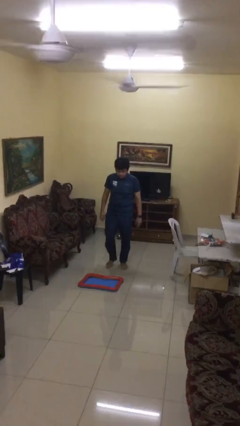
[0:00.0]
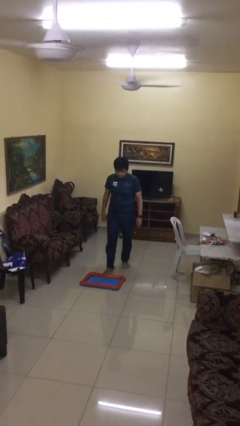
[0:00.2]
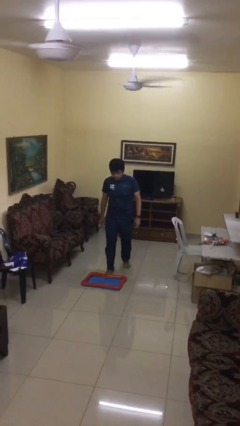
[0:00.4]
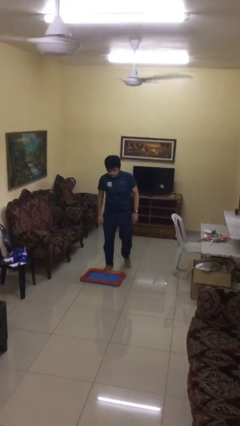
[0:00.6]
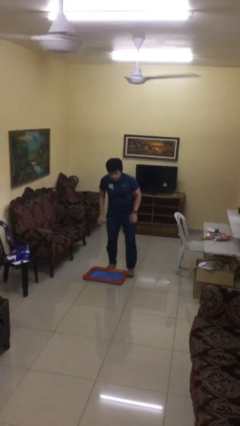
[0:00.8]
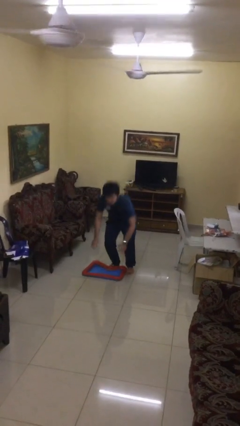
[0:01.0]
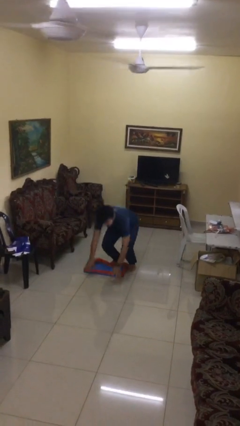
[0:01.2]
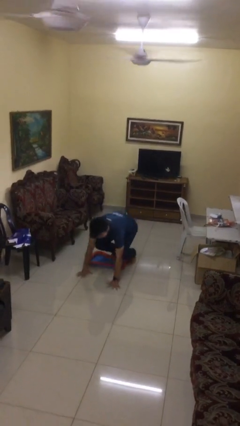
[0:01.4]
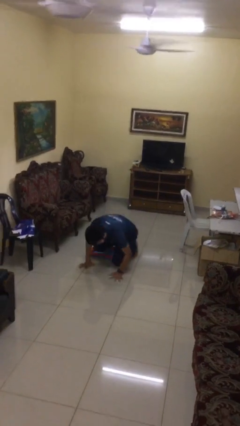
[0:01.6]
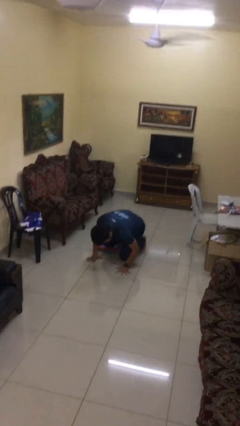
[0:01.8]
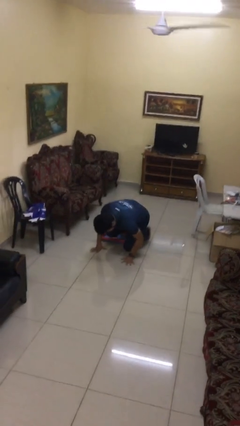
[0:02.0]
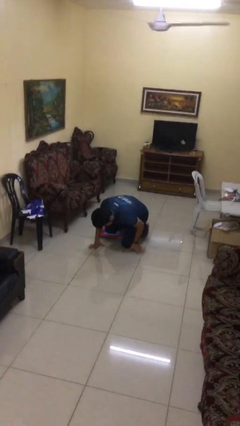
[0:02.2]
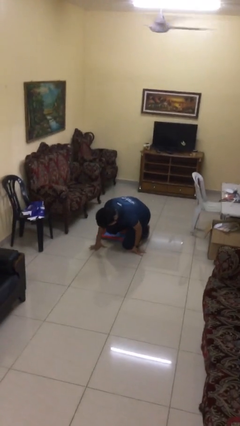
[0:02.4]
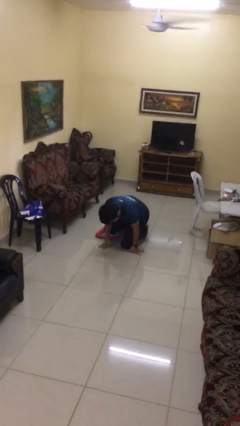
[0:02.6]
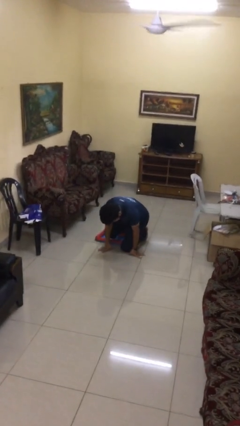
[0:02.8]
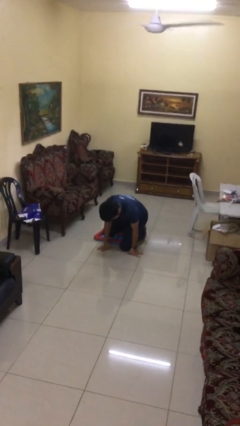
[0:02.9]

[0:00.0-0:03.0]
person trips on object on floor

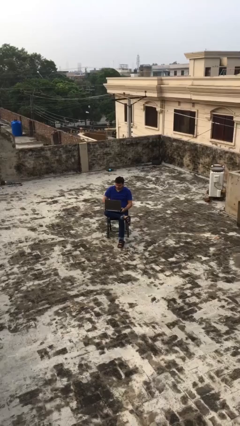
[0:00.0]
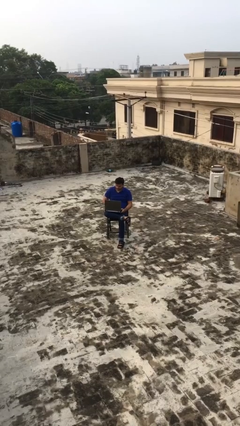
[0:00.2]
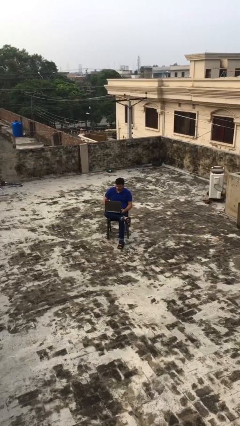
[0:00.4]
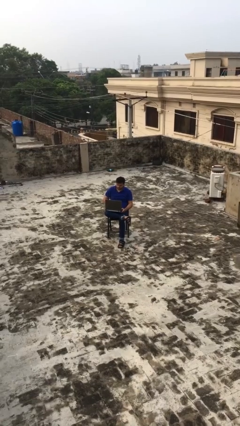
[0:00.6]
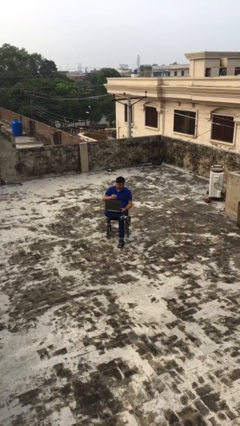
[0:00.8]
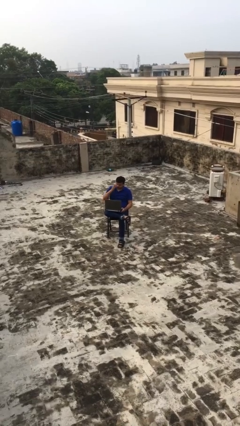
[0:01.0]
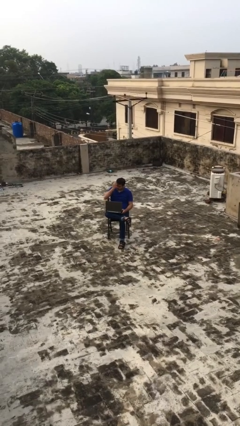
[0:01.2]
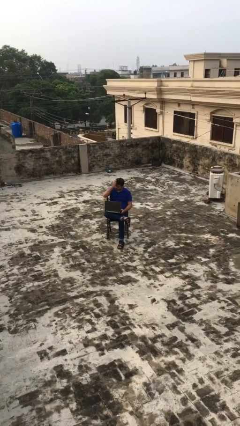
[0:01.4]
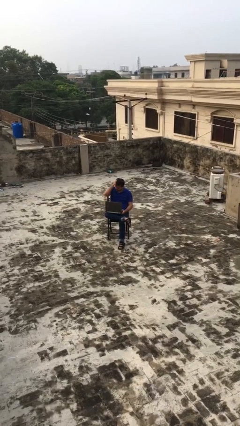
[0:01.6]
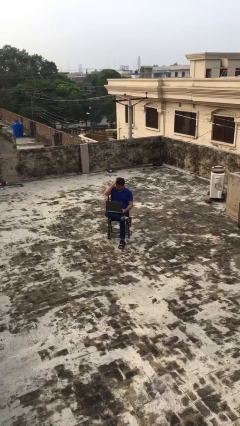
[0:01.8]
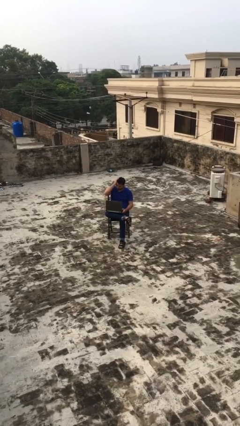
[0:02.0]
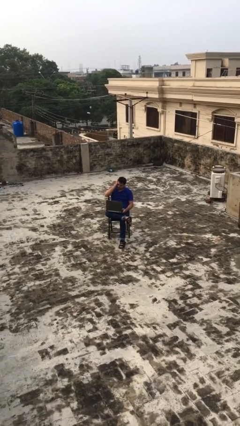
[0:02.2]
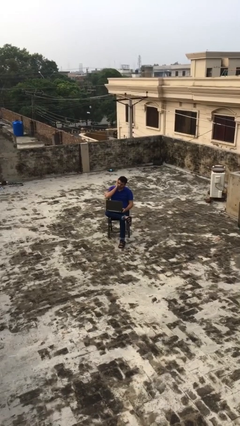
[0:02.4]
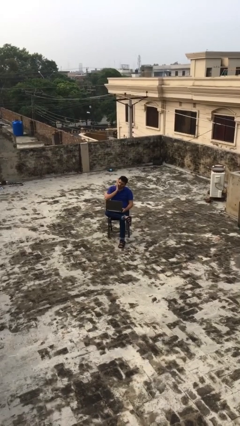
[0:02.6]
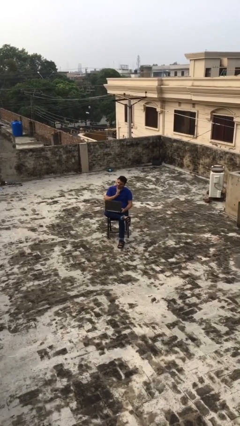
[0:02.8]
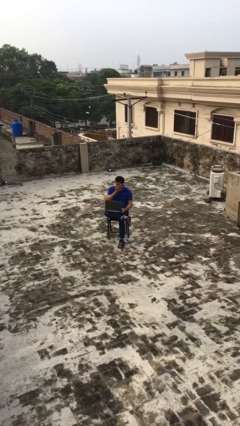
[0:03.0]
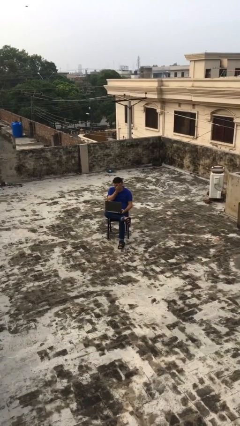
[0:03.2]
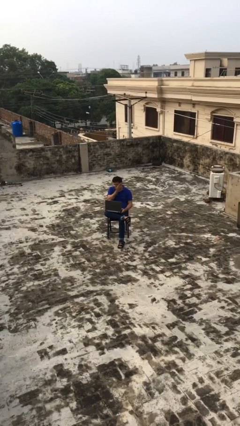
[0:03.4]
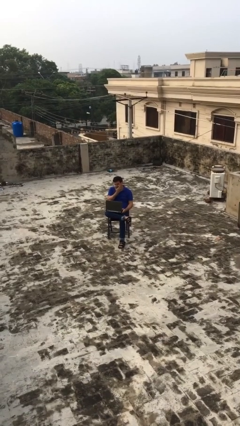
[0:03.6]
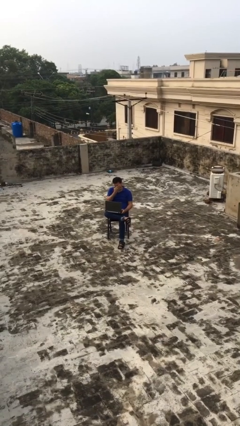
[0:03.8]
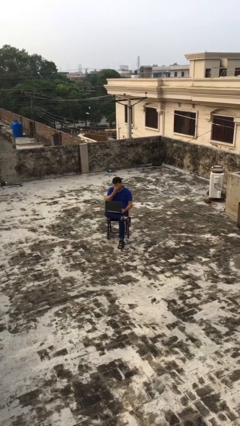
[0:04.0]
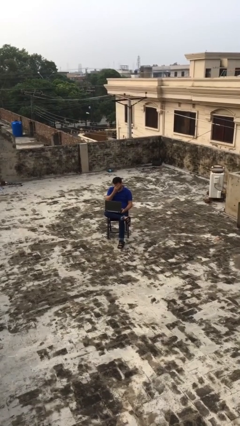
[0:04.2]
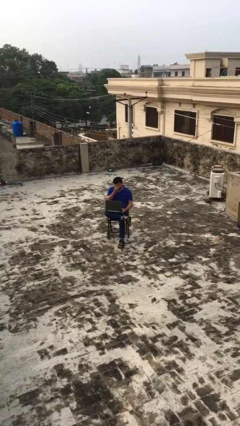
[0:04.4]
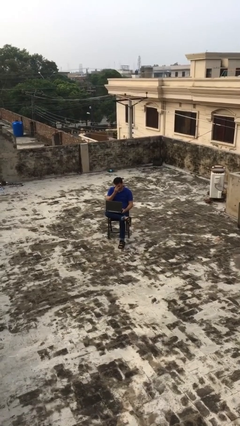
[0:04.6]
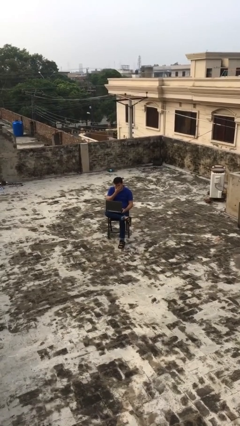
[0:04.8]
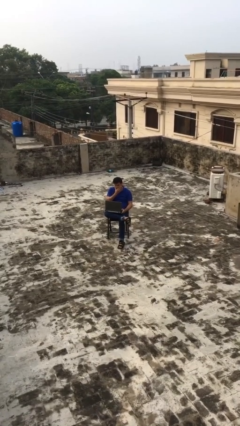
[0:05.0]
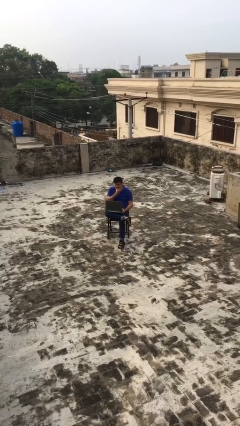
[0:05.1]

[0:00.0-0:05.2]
person interacts with laptop

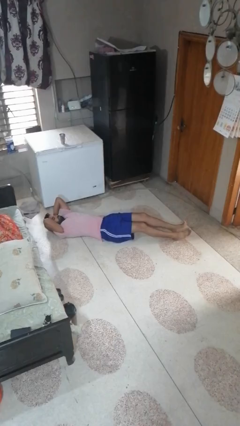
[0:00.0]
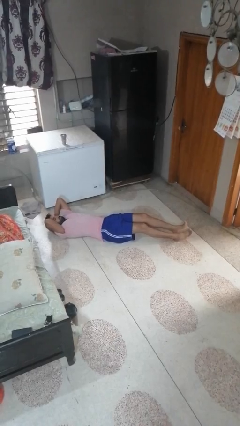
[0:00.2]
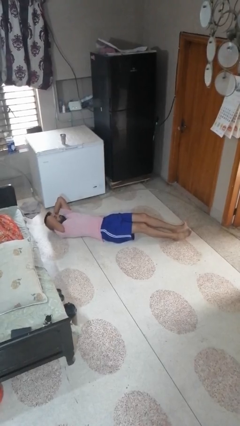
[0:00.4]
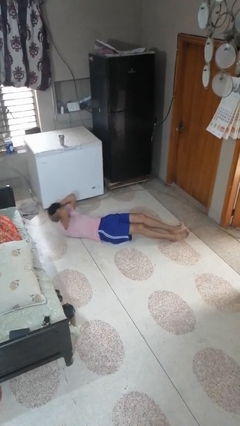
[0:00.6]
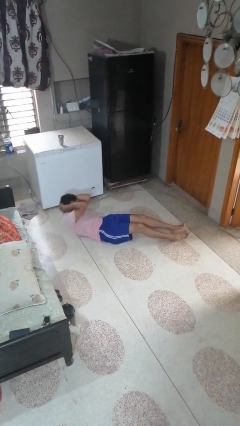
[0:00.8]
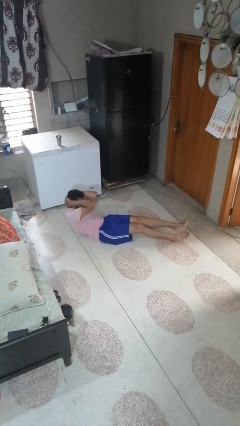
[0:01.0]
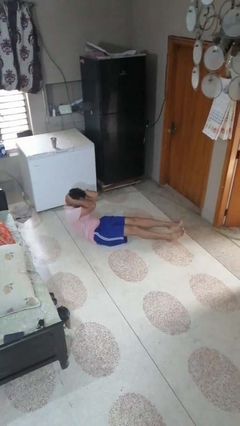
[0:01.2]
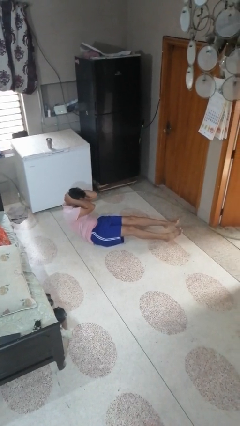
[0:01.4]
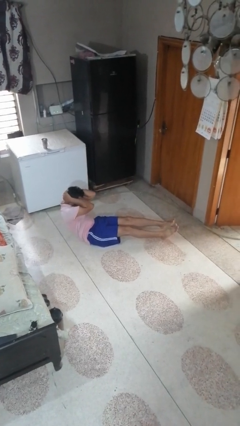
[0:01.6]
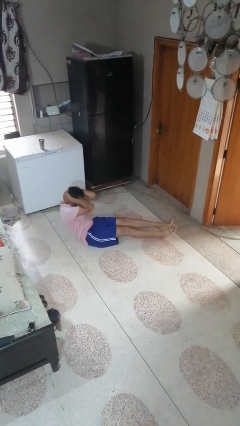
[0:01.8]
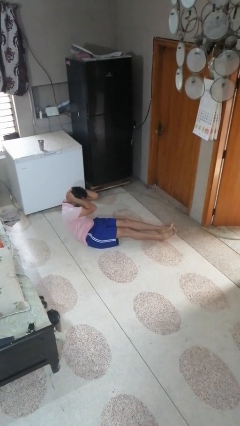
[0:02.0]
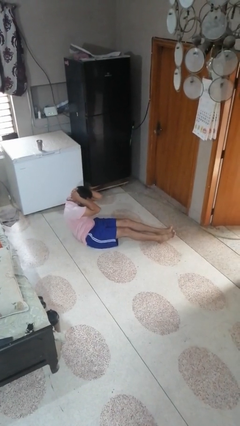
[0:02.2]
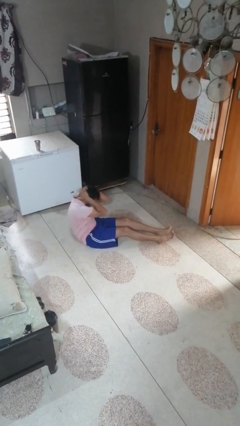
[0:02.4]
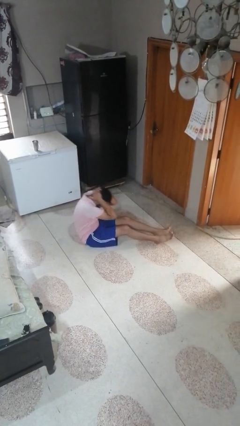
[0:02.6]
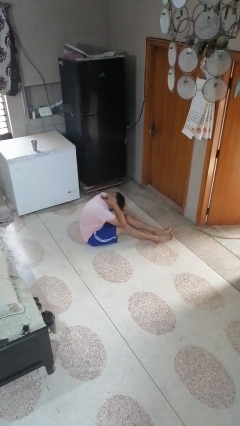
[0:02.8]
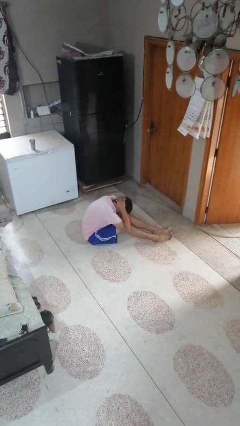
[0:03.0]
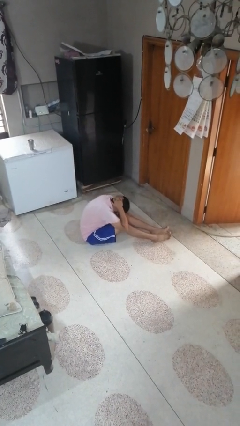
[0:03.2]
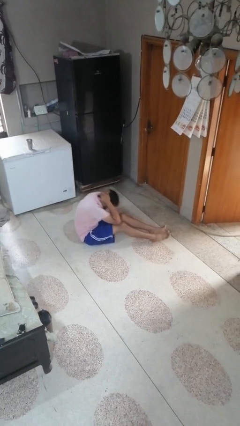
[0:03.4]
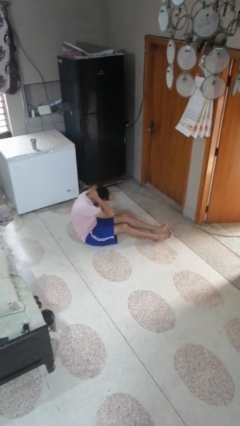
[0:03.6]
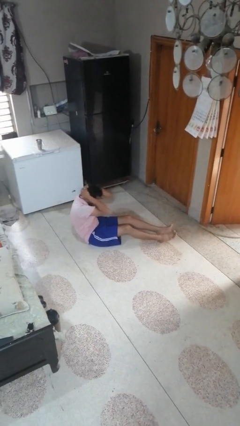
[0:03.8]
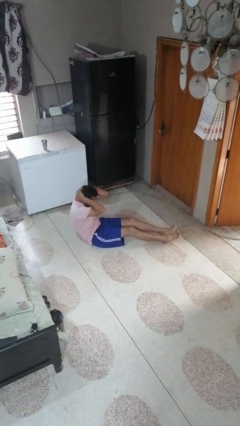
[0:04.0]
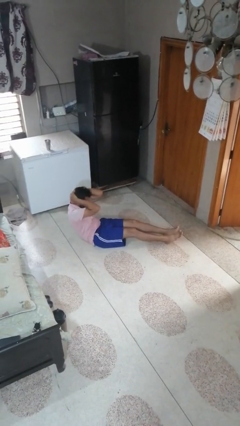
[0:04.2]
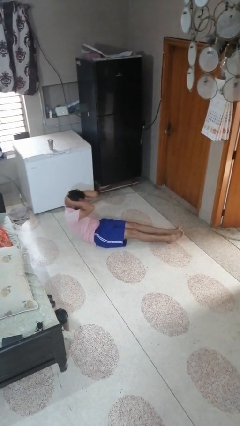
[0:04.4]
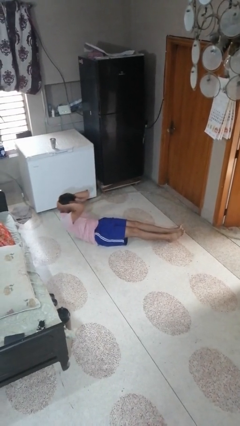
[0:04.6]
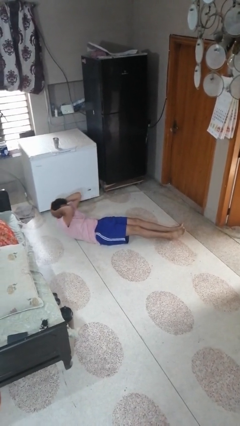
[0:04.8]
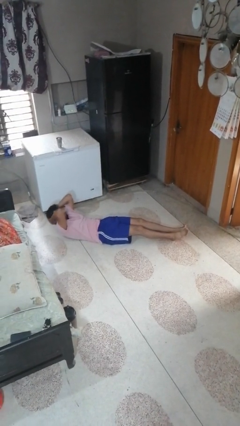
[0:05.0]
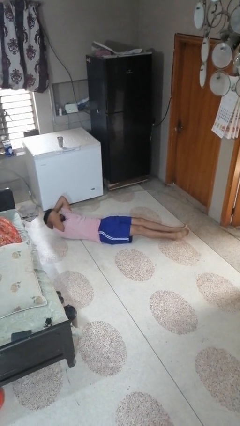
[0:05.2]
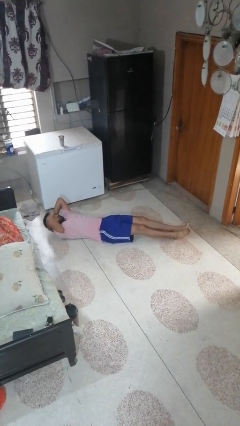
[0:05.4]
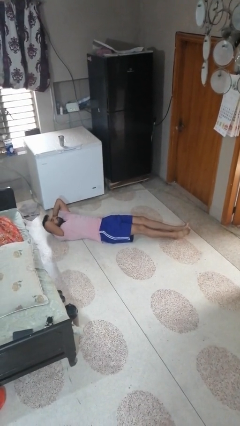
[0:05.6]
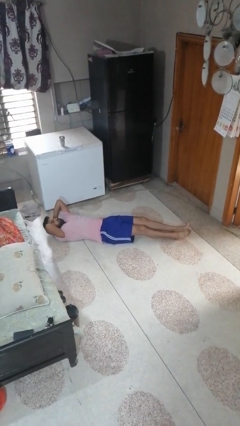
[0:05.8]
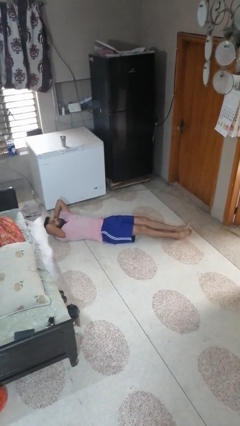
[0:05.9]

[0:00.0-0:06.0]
person exercises with situp

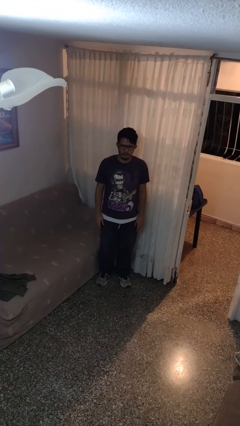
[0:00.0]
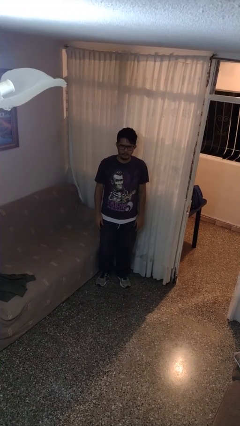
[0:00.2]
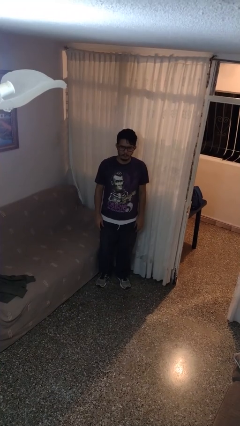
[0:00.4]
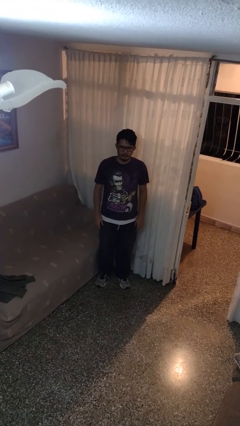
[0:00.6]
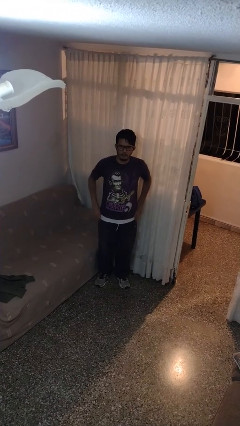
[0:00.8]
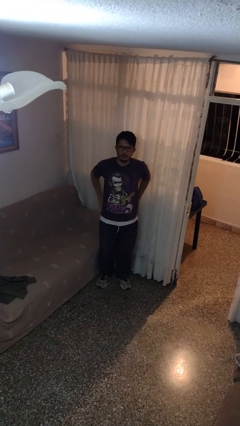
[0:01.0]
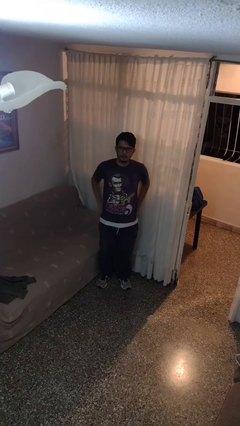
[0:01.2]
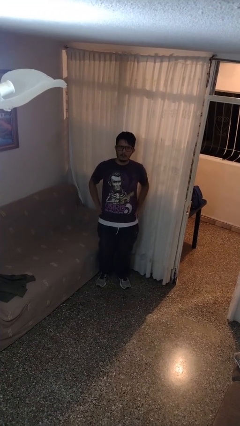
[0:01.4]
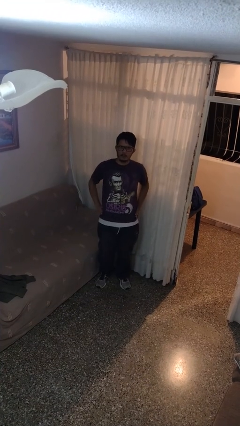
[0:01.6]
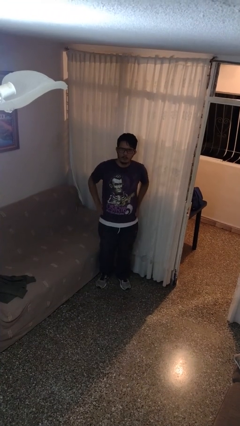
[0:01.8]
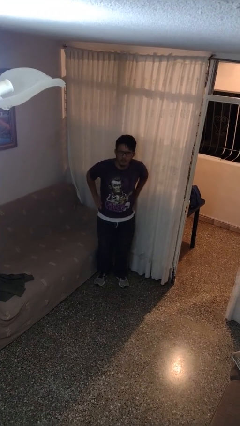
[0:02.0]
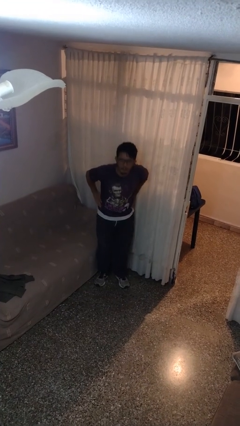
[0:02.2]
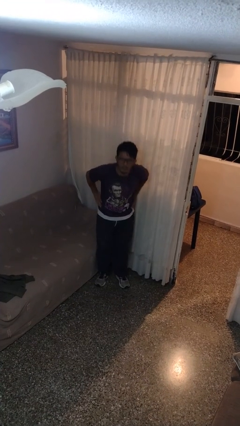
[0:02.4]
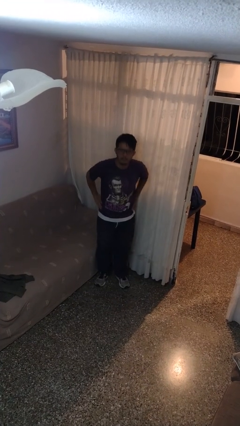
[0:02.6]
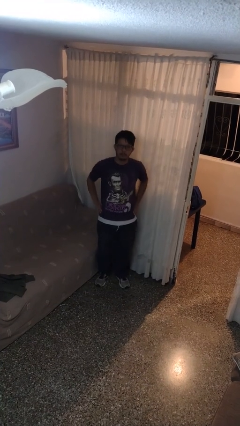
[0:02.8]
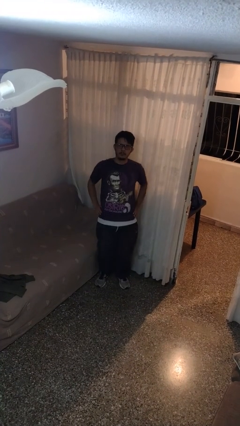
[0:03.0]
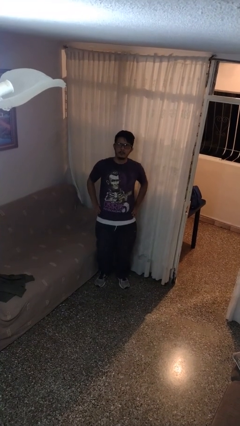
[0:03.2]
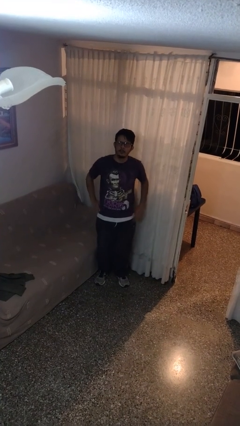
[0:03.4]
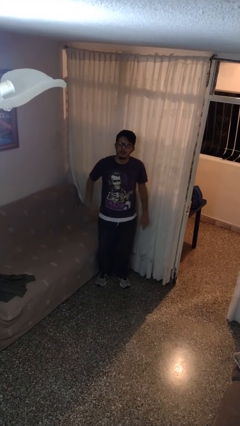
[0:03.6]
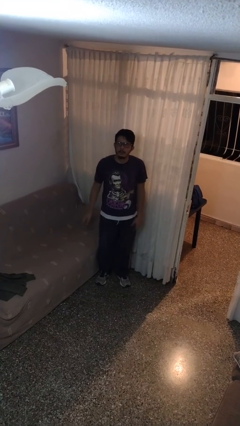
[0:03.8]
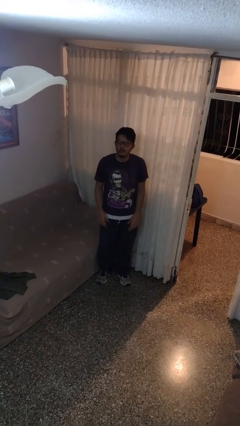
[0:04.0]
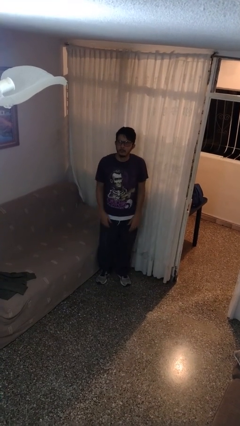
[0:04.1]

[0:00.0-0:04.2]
person wiggles hips
